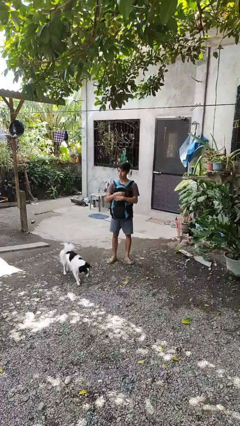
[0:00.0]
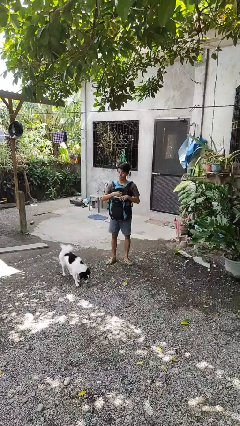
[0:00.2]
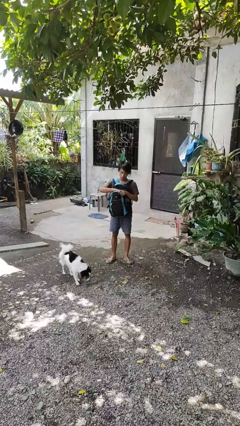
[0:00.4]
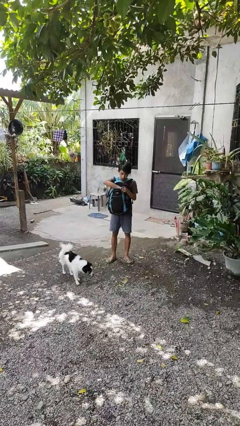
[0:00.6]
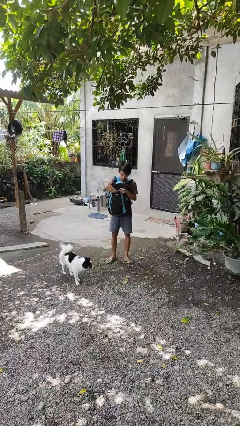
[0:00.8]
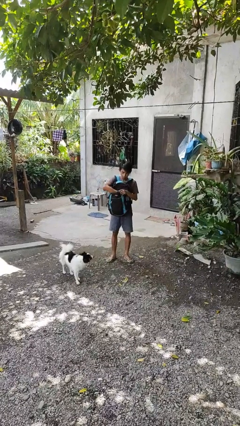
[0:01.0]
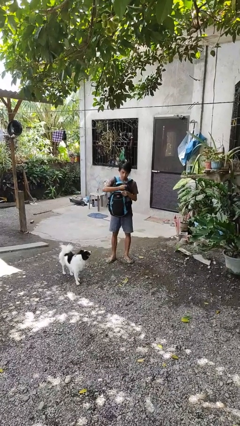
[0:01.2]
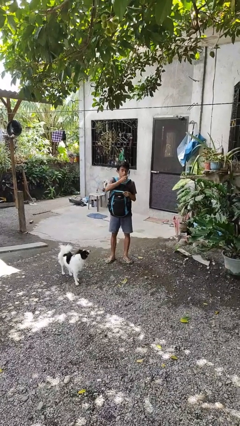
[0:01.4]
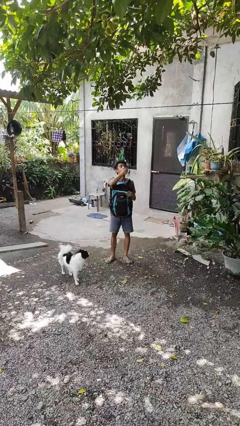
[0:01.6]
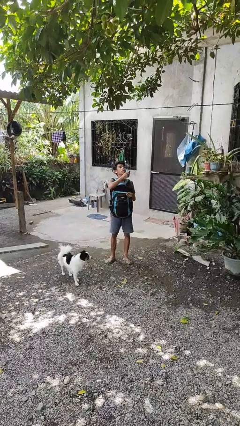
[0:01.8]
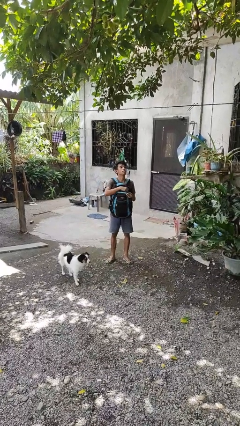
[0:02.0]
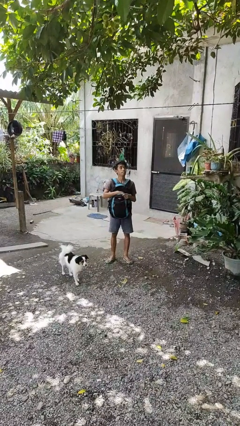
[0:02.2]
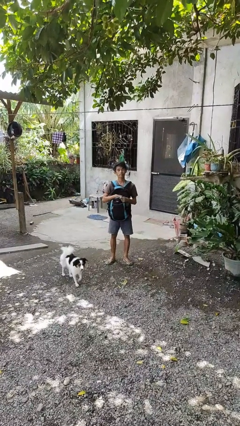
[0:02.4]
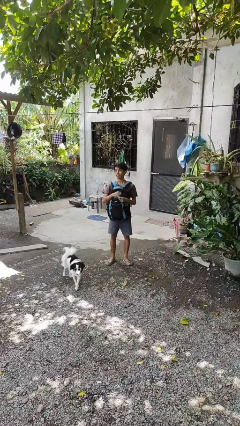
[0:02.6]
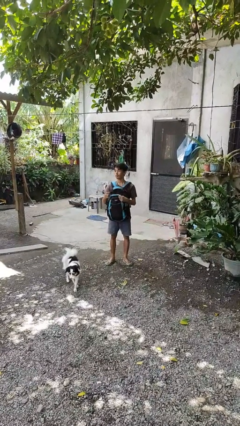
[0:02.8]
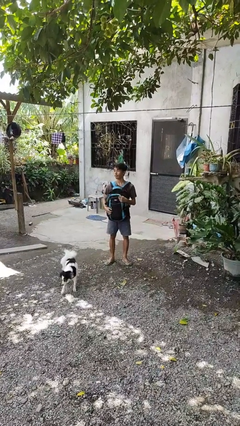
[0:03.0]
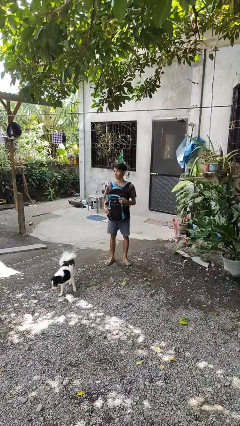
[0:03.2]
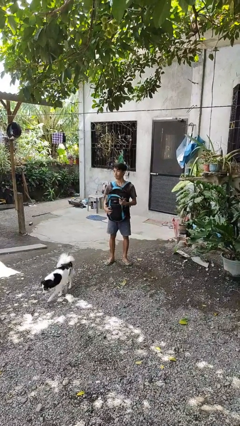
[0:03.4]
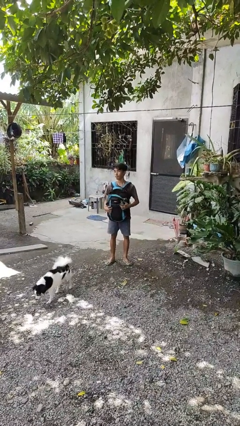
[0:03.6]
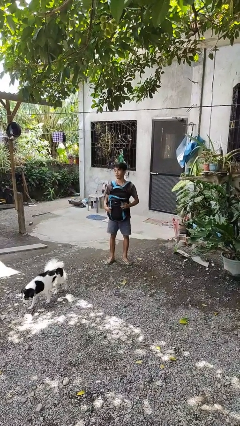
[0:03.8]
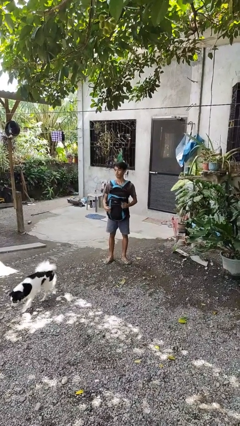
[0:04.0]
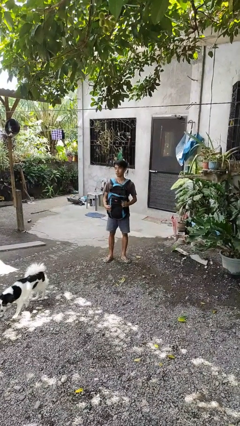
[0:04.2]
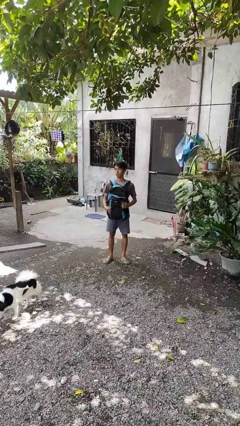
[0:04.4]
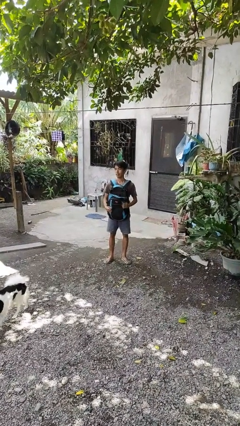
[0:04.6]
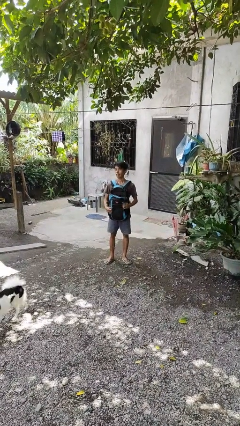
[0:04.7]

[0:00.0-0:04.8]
person eats snack from bag

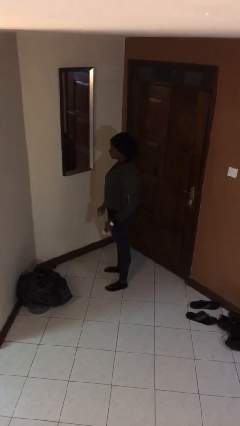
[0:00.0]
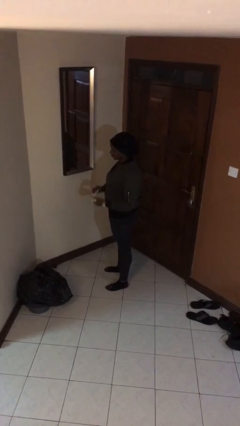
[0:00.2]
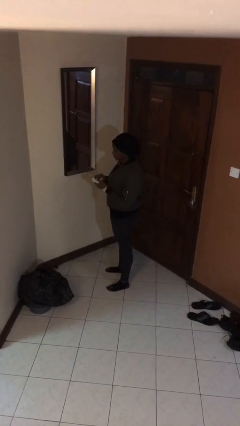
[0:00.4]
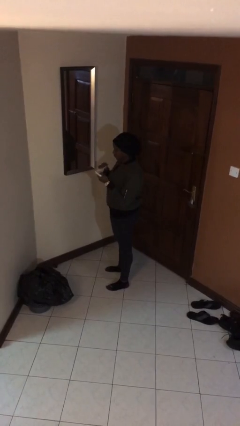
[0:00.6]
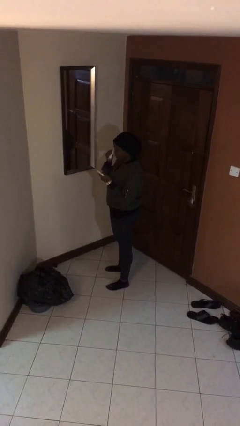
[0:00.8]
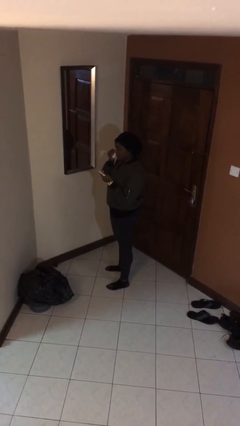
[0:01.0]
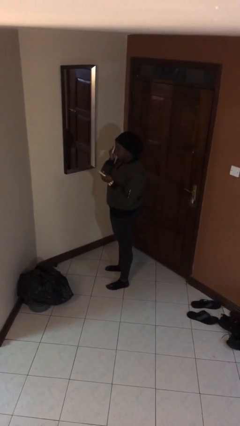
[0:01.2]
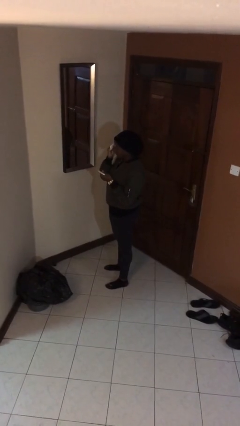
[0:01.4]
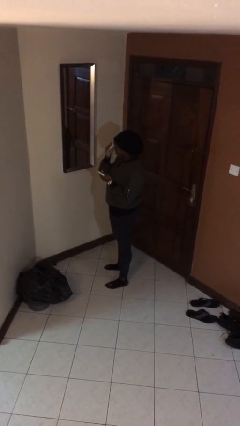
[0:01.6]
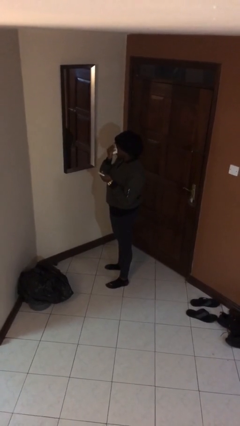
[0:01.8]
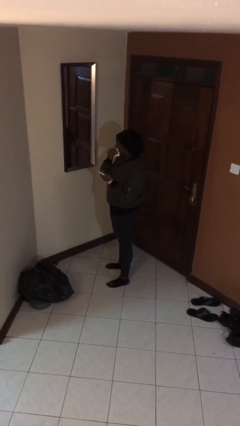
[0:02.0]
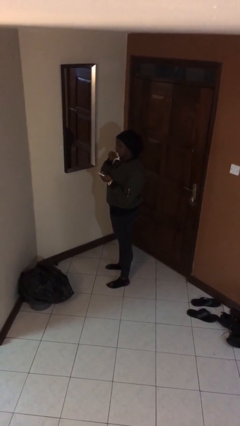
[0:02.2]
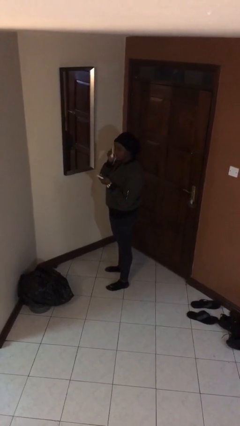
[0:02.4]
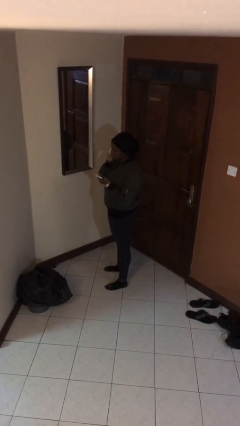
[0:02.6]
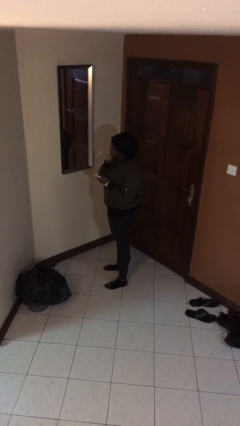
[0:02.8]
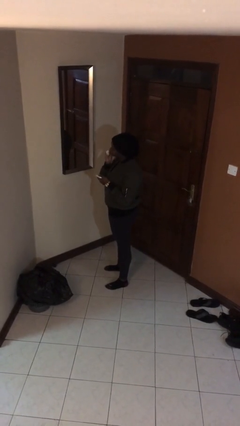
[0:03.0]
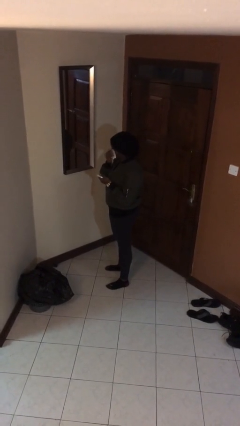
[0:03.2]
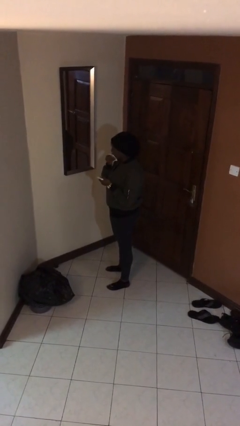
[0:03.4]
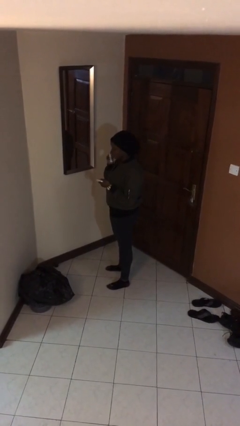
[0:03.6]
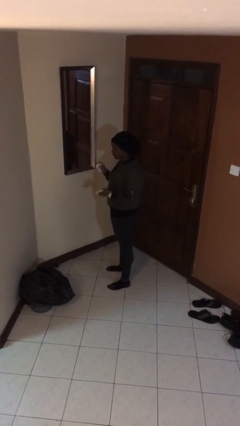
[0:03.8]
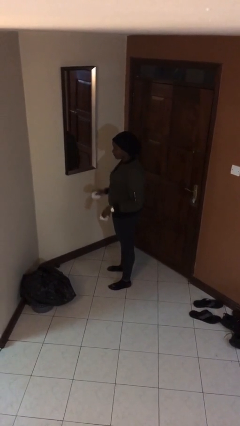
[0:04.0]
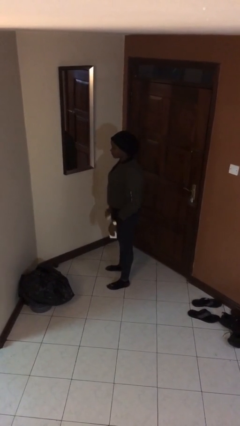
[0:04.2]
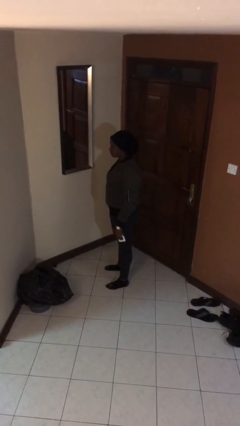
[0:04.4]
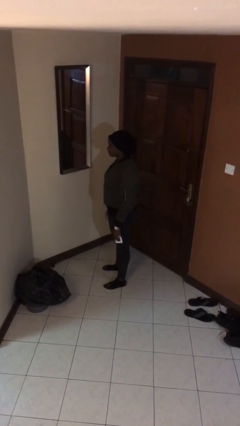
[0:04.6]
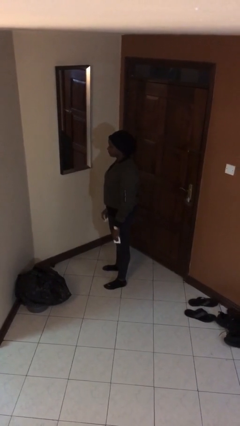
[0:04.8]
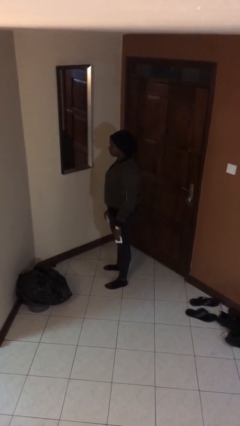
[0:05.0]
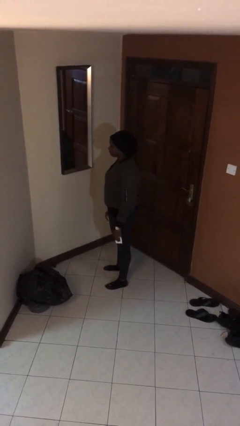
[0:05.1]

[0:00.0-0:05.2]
person applies foundation makeup

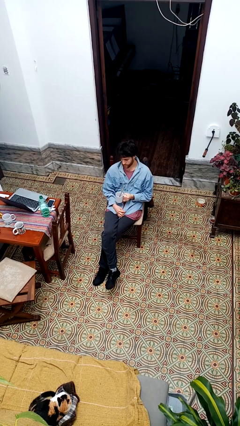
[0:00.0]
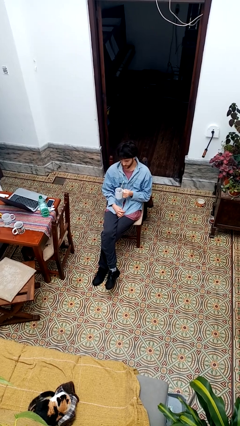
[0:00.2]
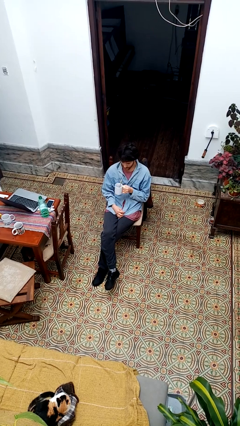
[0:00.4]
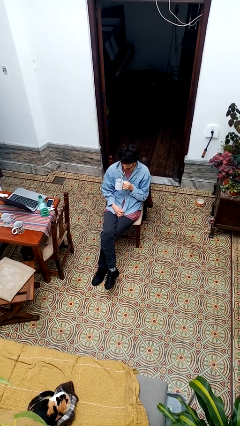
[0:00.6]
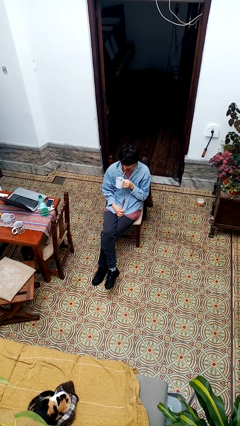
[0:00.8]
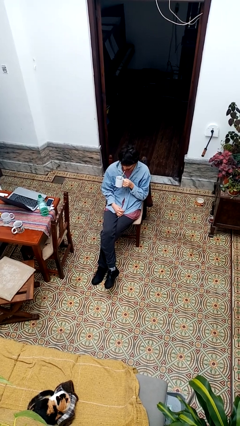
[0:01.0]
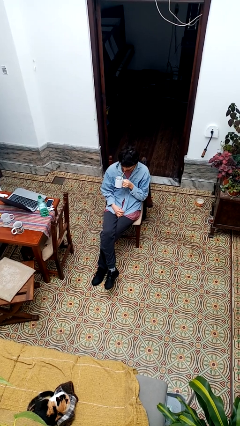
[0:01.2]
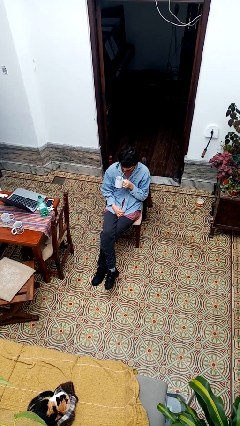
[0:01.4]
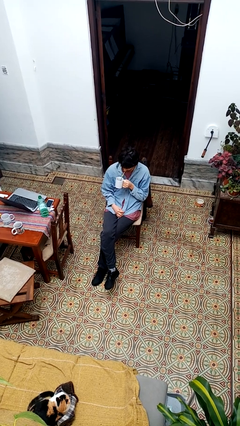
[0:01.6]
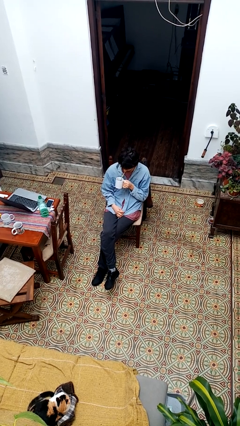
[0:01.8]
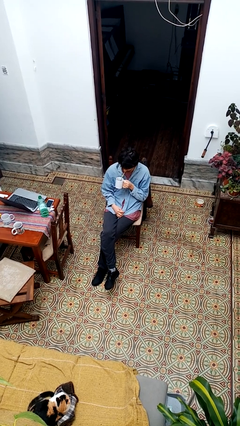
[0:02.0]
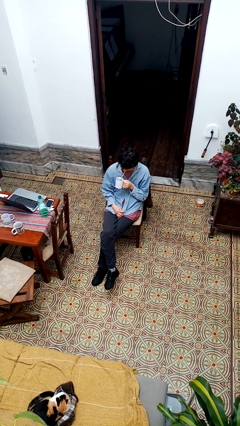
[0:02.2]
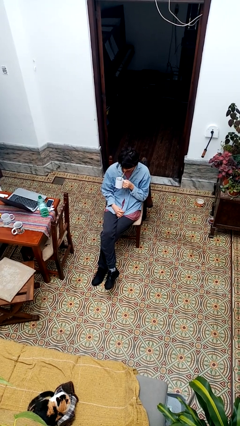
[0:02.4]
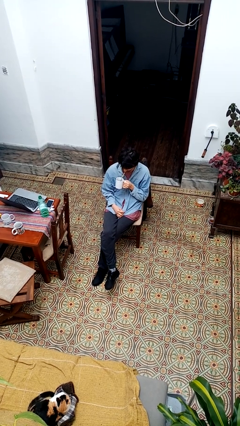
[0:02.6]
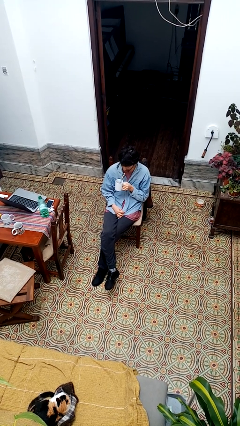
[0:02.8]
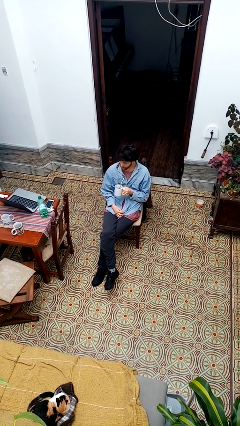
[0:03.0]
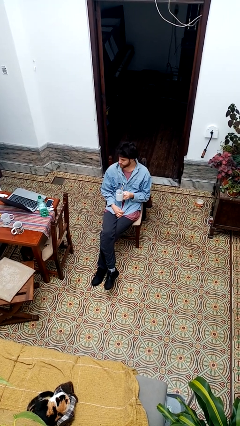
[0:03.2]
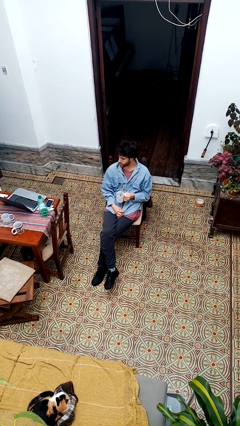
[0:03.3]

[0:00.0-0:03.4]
person drinks from straw

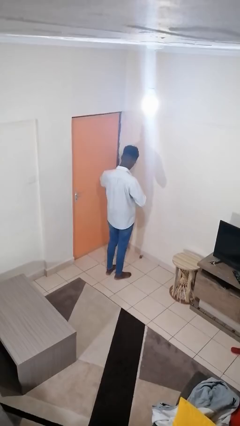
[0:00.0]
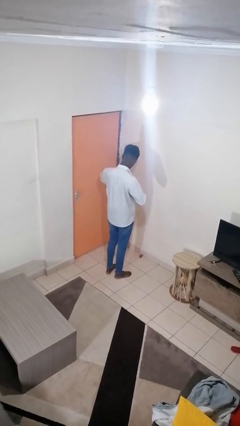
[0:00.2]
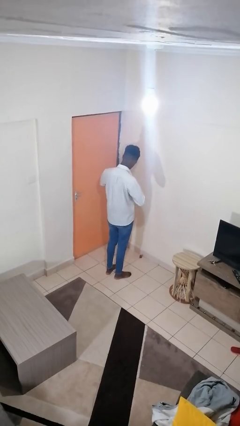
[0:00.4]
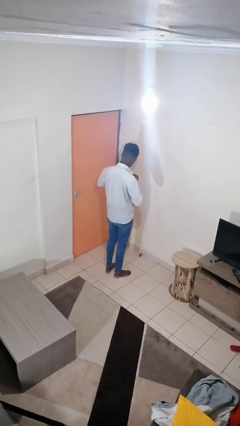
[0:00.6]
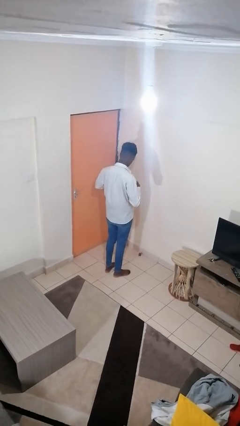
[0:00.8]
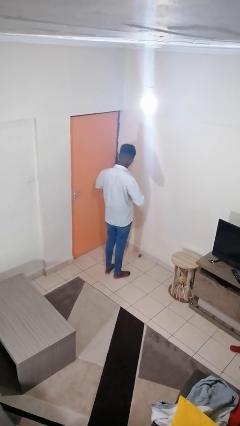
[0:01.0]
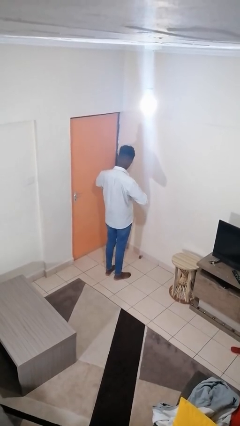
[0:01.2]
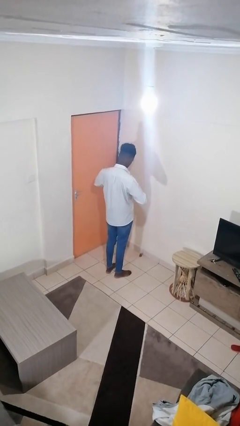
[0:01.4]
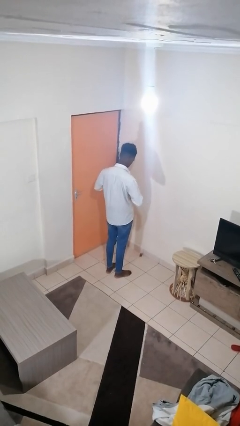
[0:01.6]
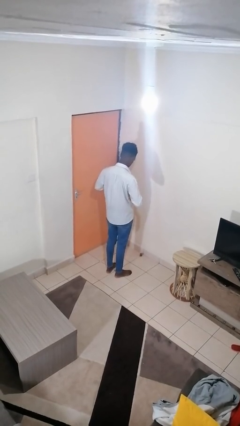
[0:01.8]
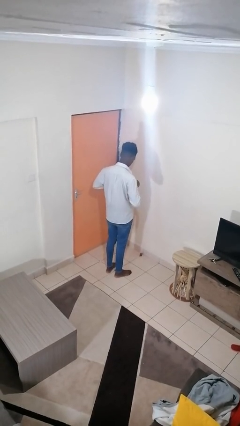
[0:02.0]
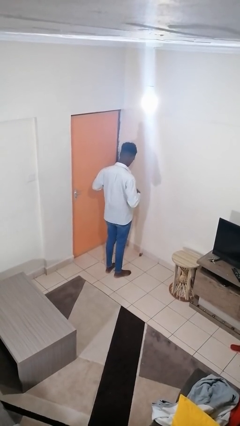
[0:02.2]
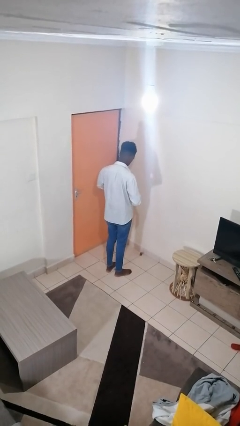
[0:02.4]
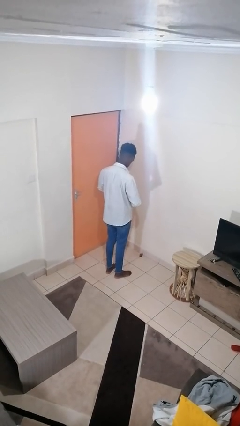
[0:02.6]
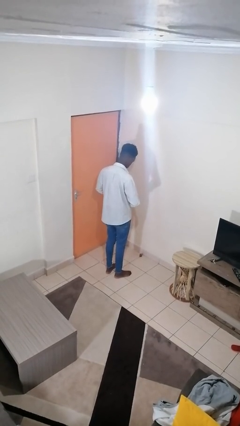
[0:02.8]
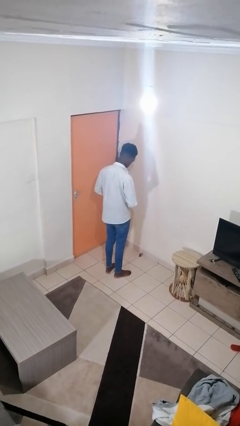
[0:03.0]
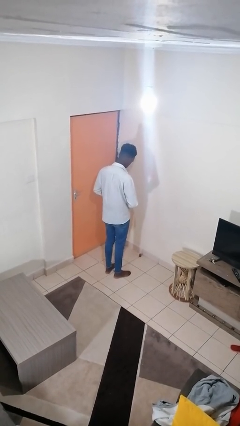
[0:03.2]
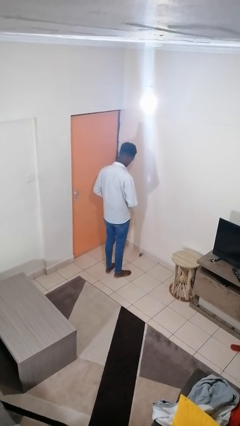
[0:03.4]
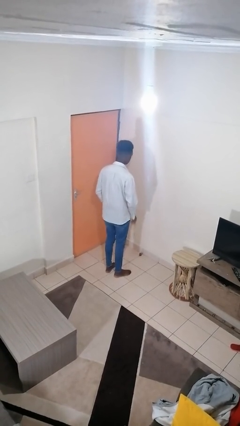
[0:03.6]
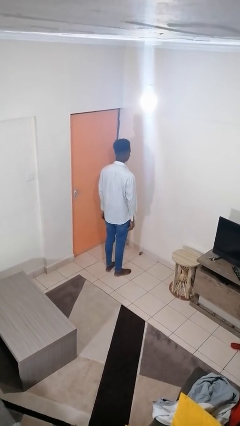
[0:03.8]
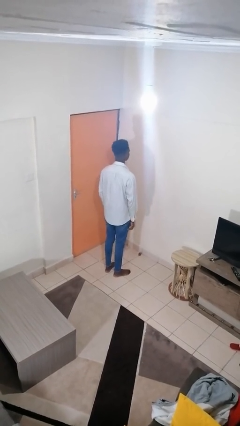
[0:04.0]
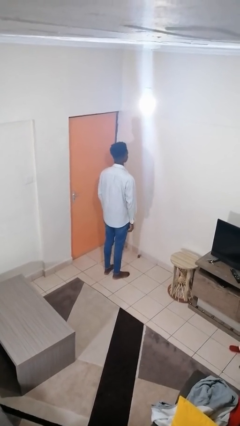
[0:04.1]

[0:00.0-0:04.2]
person unbuttons shirt

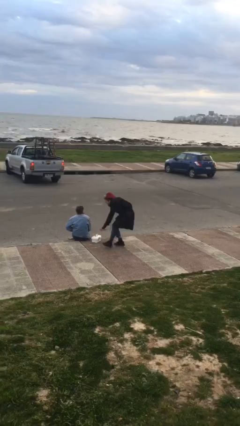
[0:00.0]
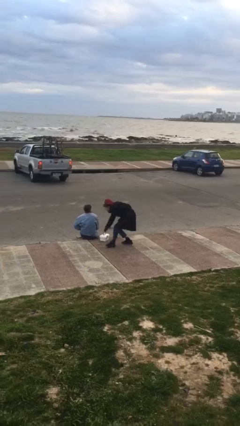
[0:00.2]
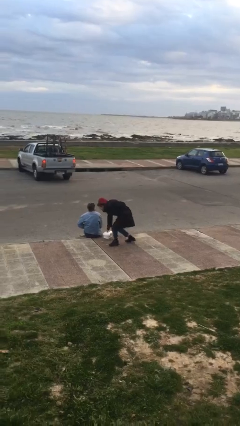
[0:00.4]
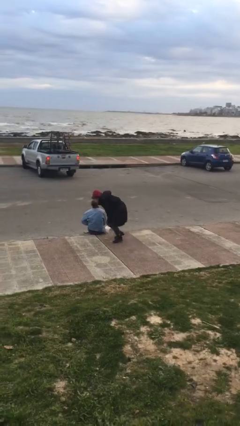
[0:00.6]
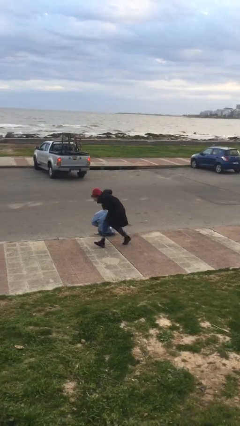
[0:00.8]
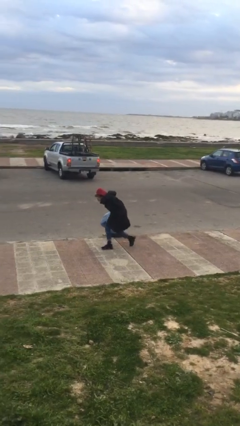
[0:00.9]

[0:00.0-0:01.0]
person steals object from person
